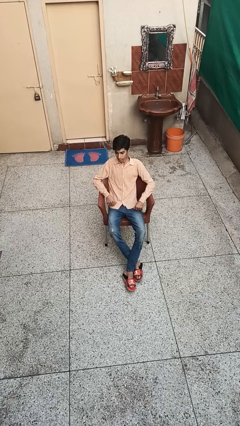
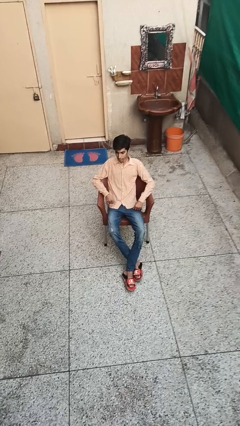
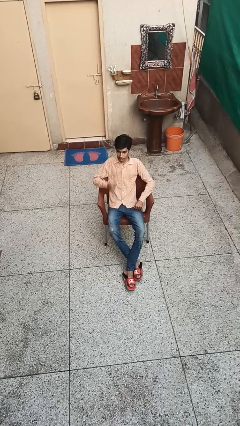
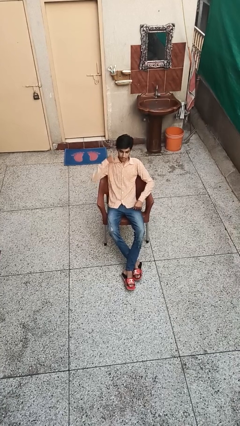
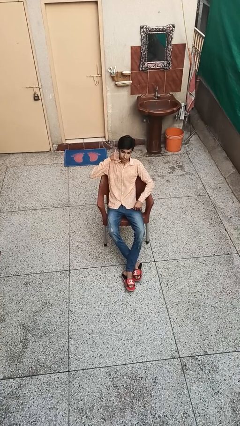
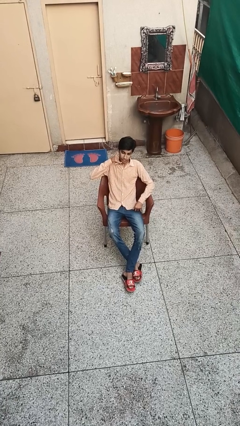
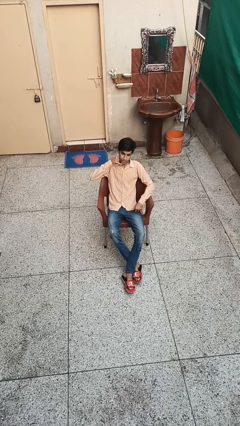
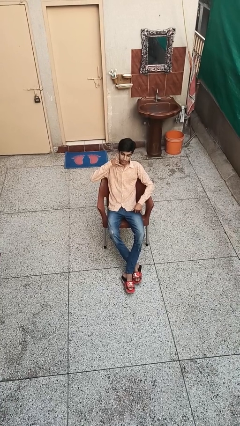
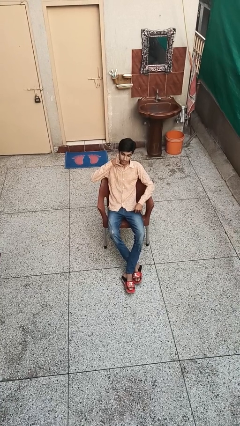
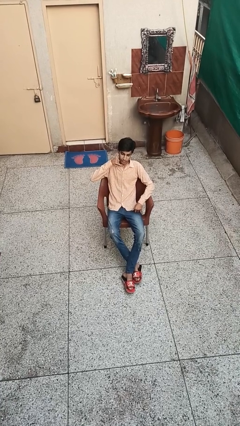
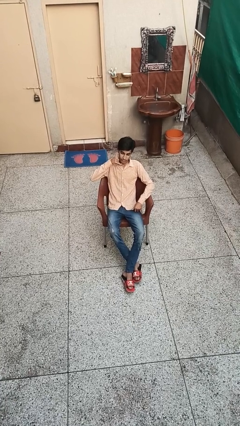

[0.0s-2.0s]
person gestures call me

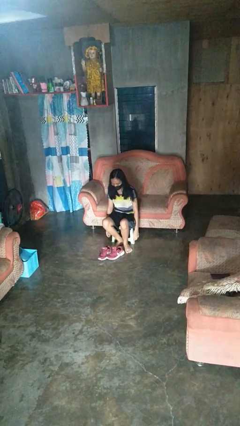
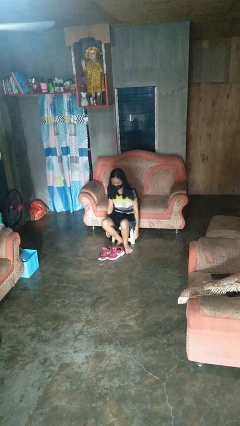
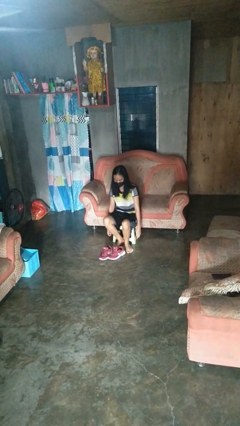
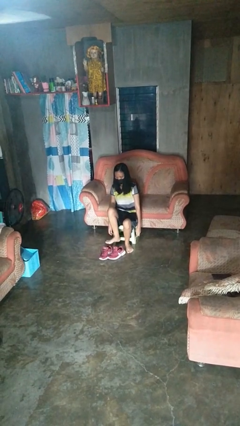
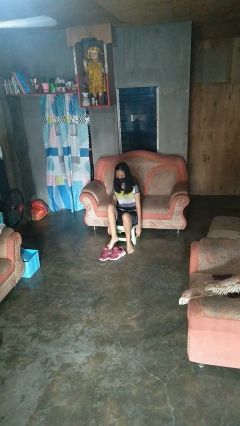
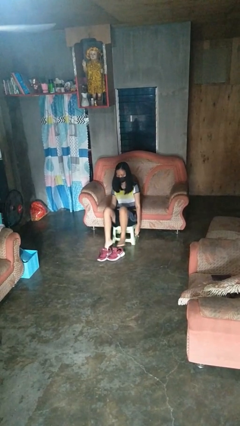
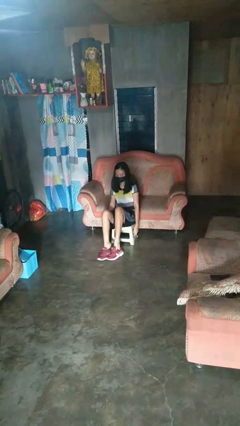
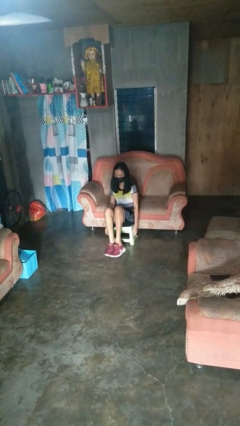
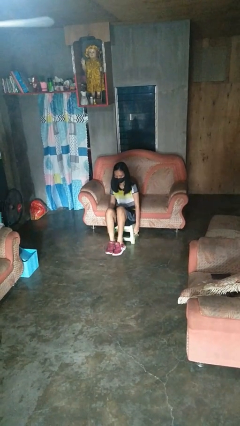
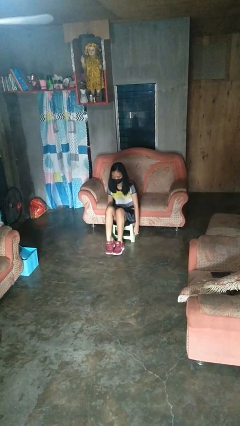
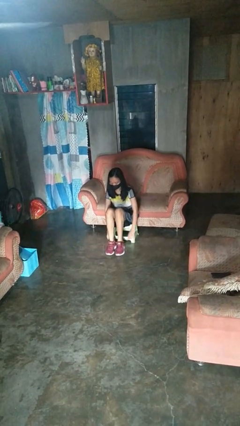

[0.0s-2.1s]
person puts on shoes

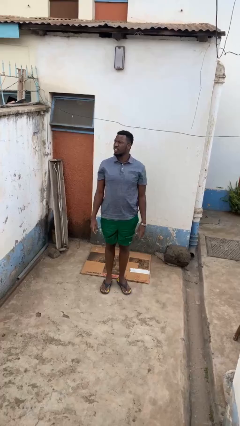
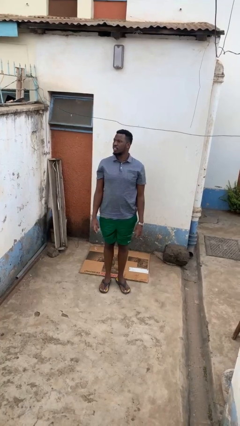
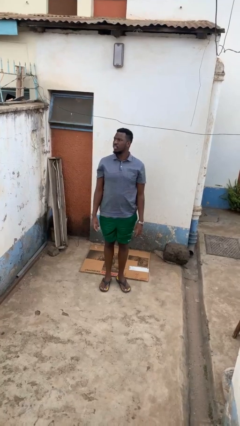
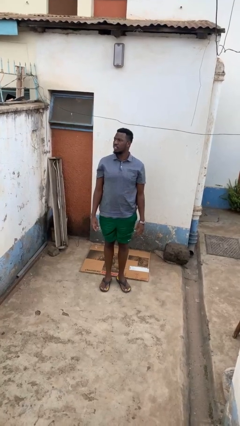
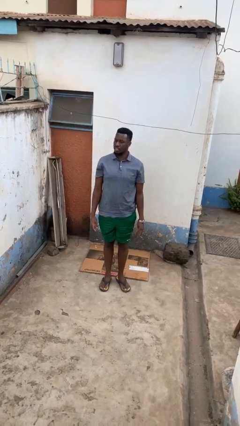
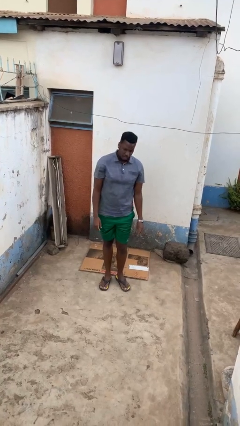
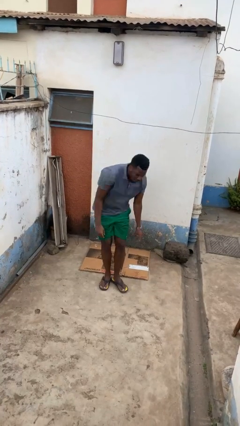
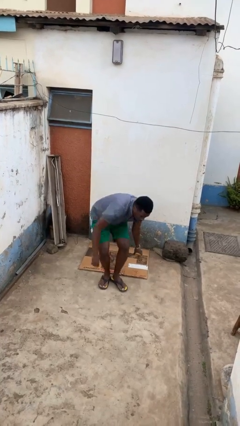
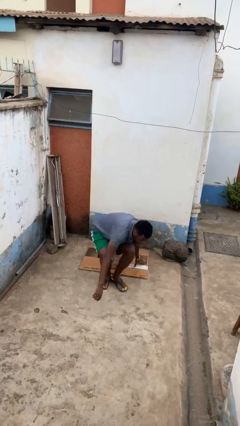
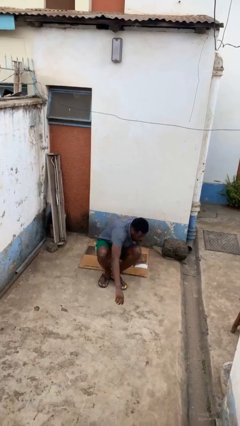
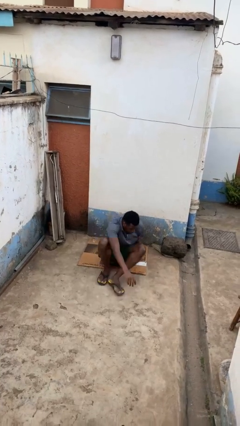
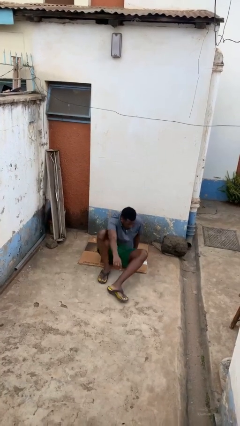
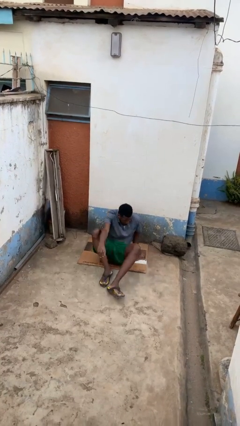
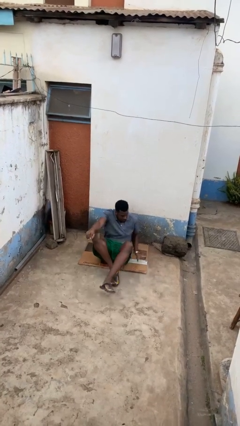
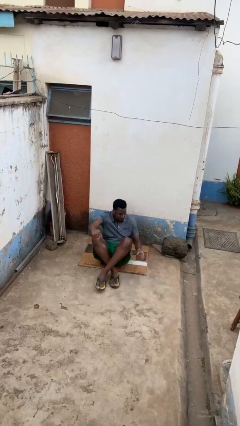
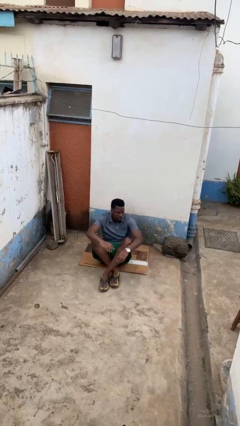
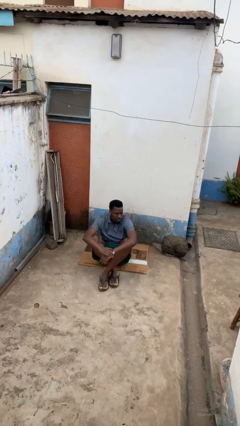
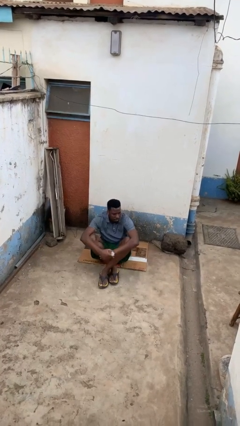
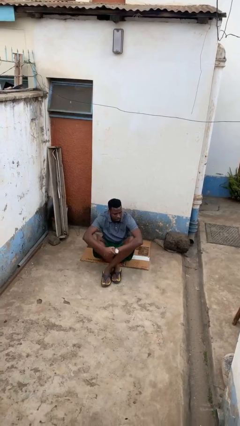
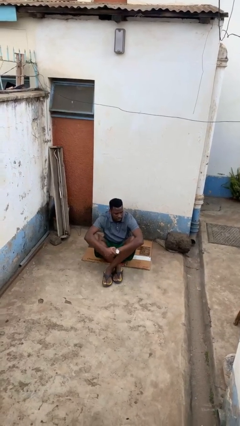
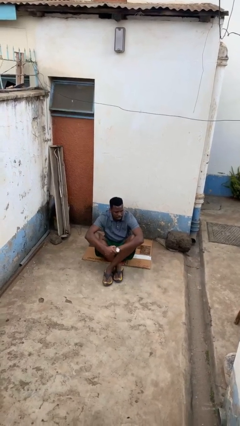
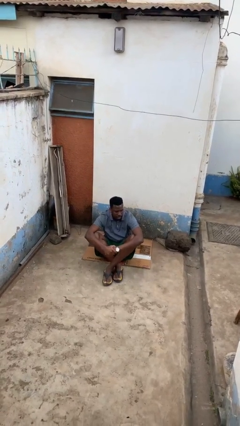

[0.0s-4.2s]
person sits crisscross

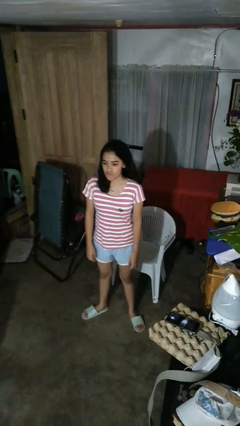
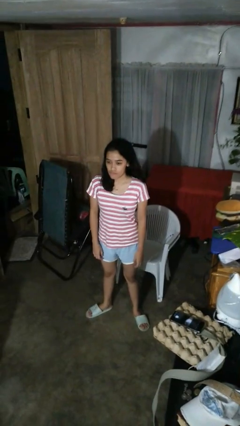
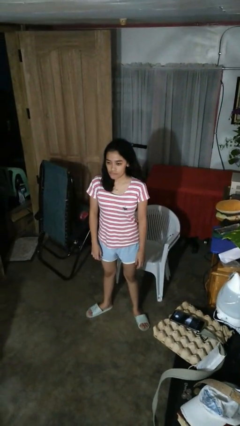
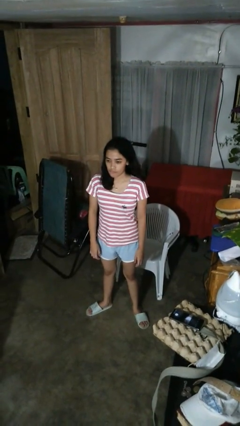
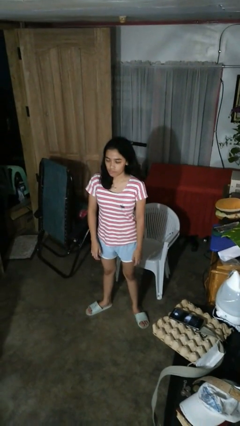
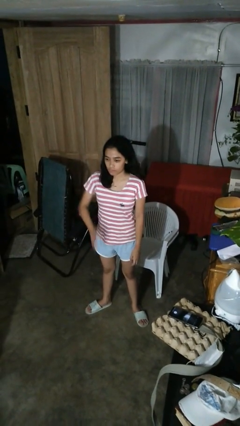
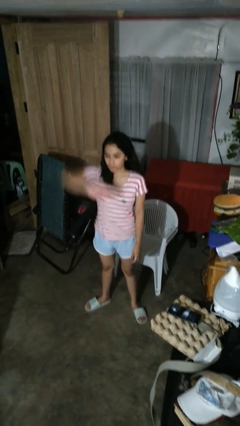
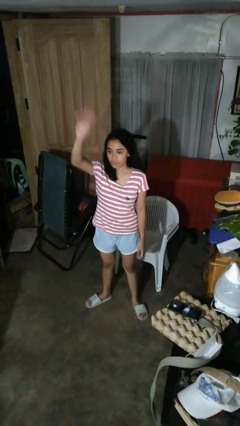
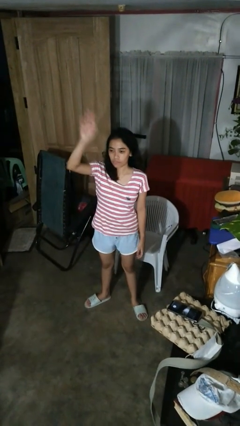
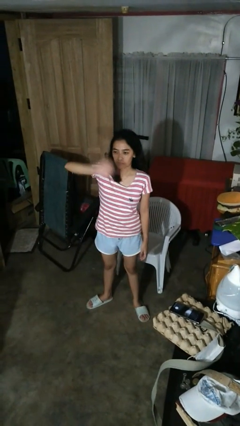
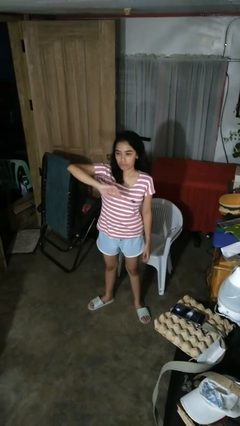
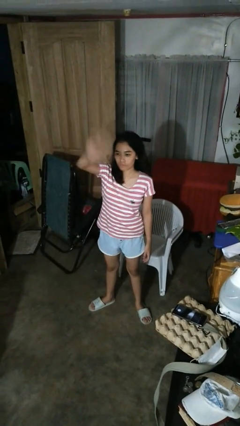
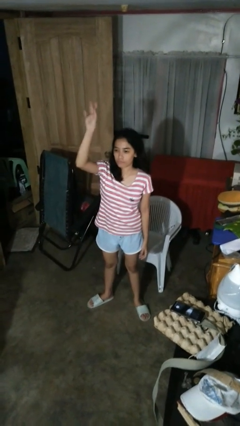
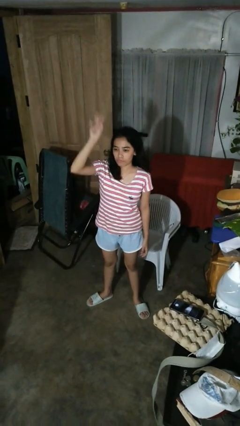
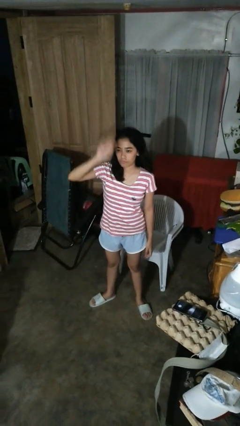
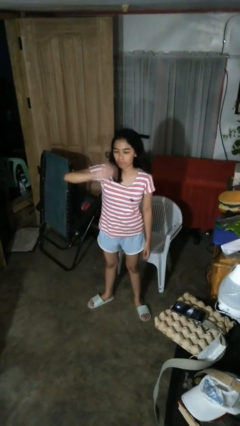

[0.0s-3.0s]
person gestures swipe up

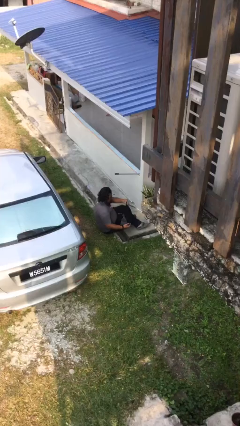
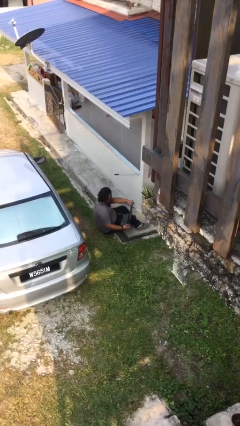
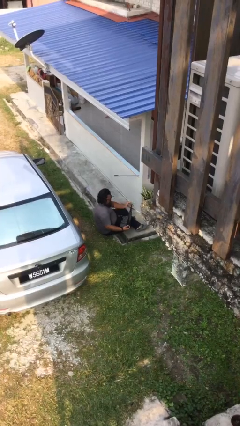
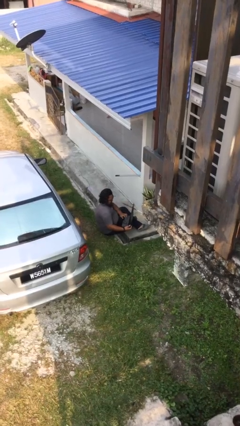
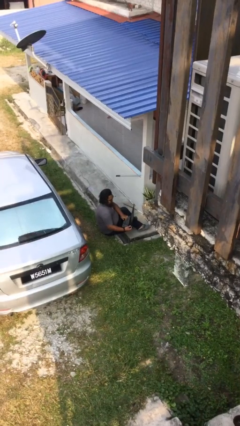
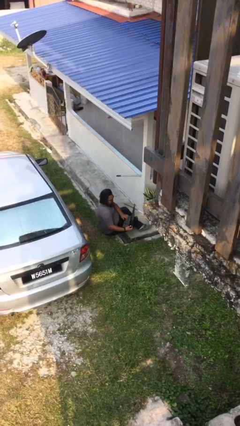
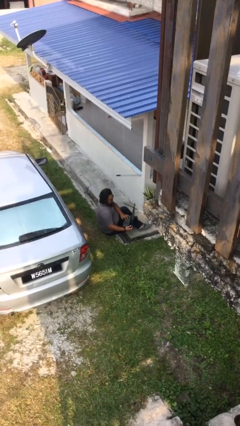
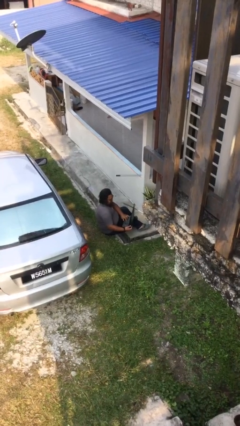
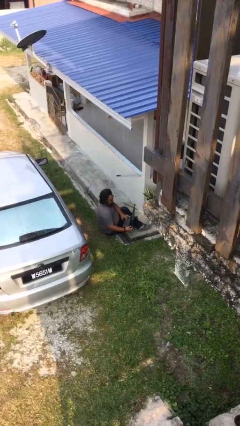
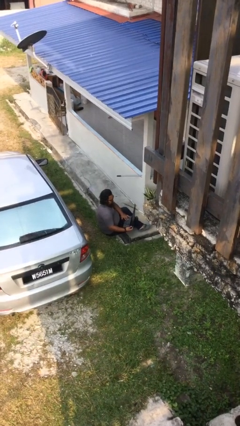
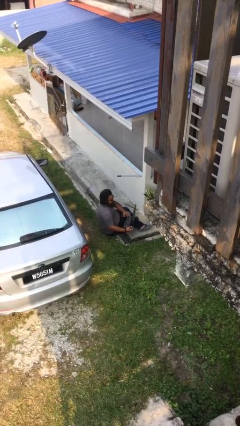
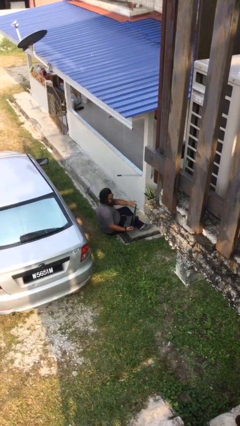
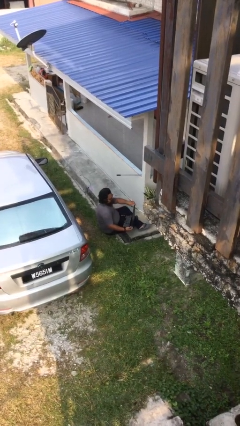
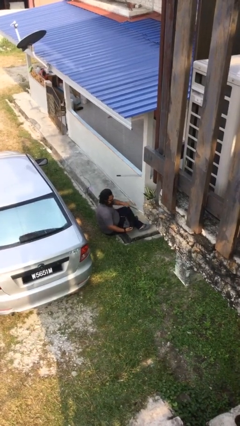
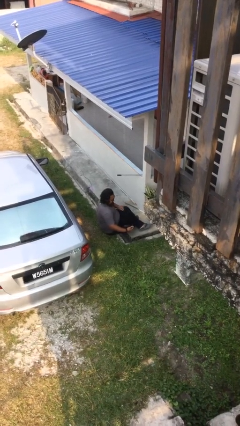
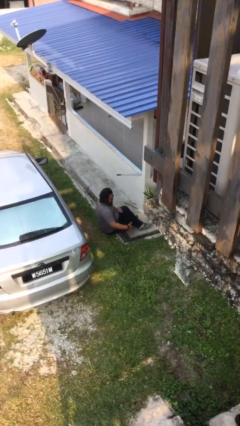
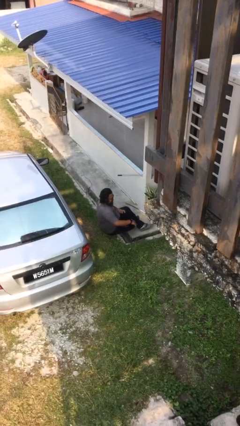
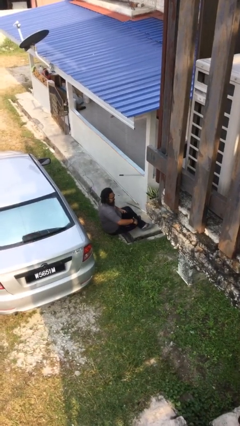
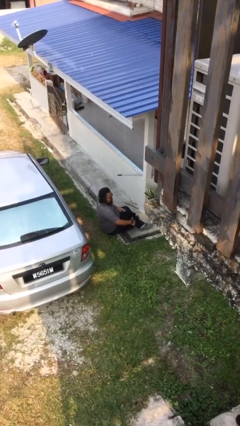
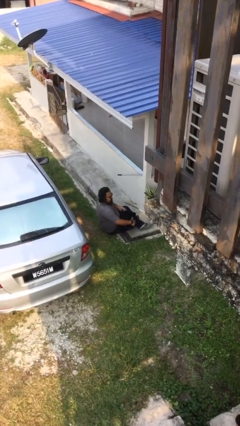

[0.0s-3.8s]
person interacts with laptop

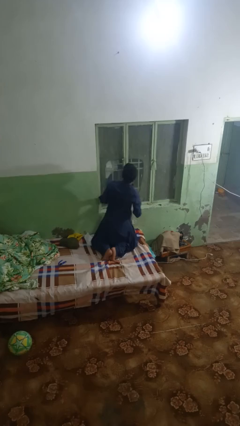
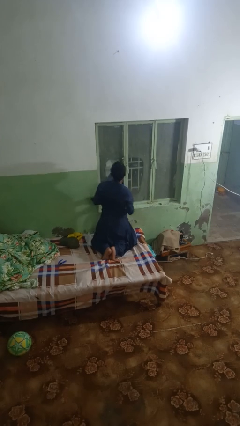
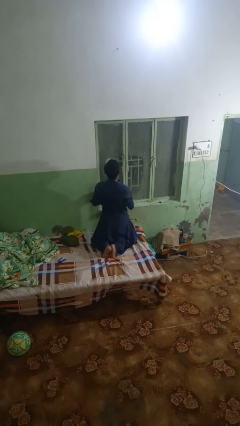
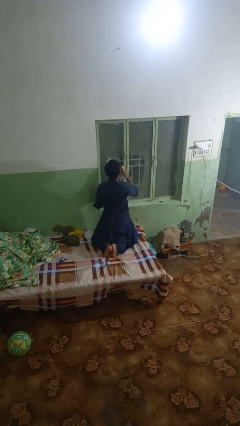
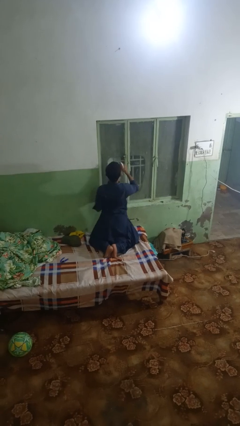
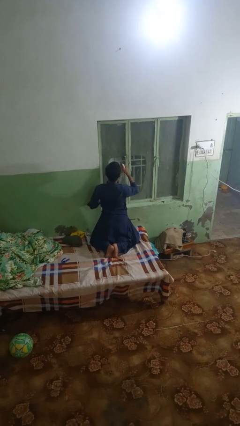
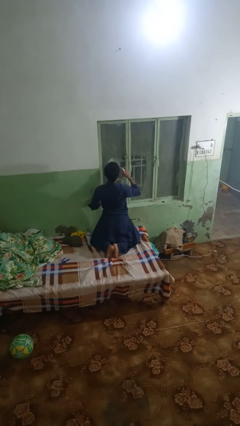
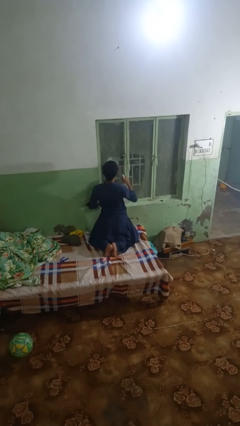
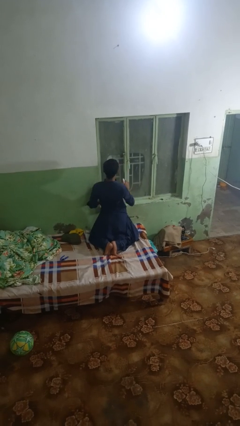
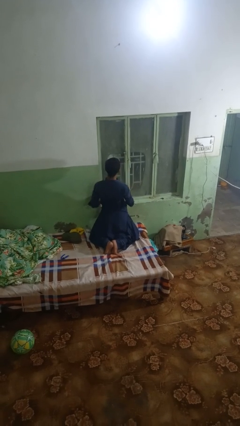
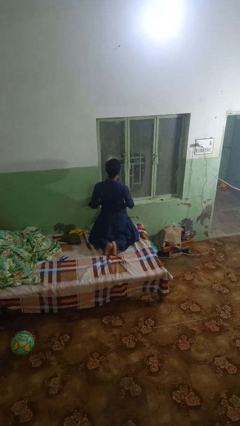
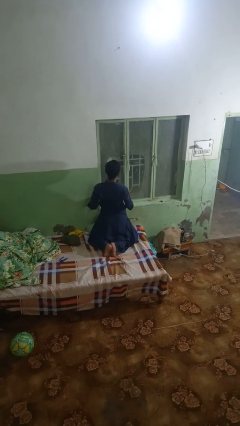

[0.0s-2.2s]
person sprays from bottle
